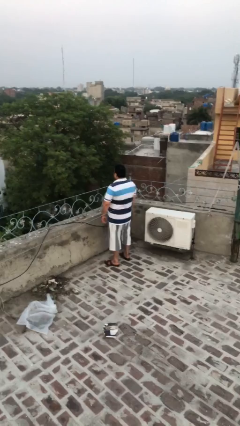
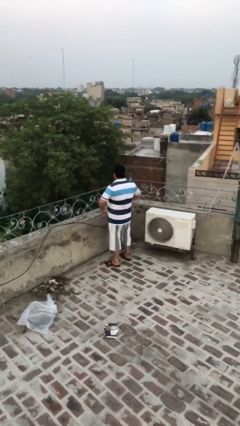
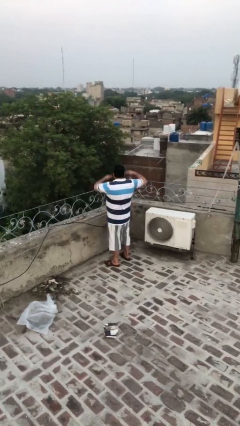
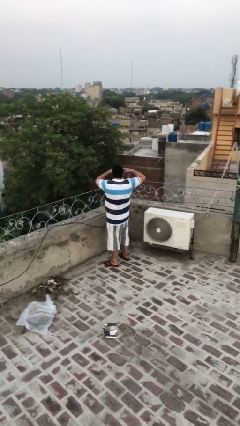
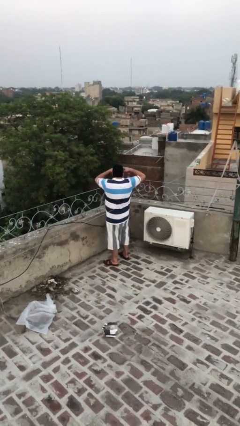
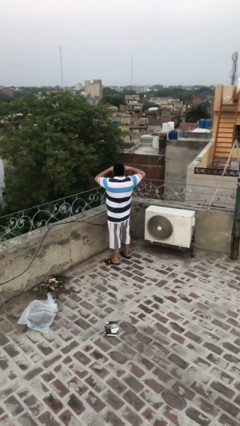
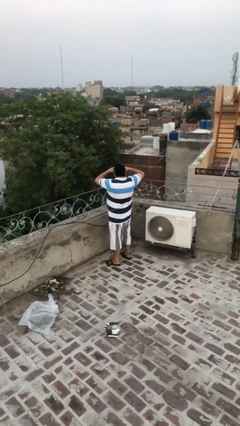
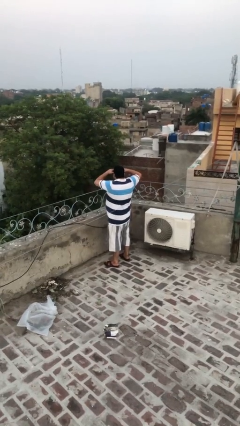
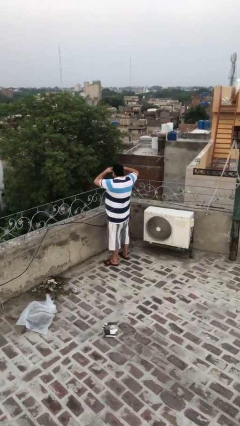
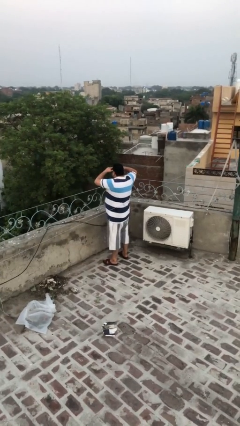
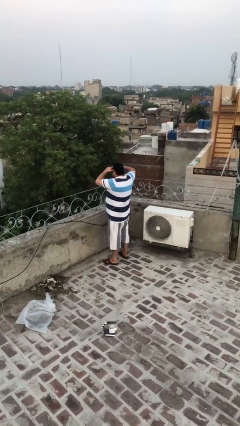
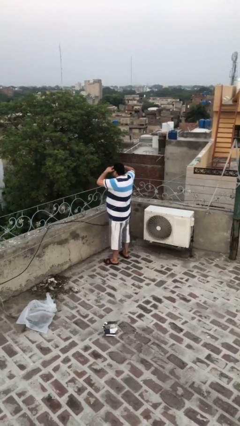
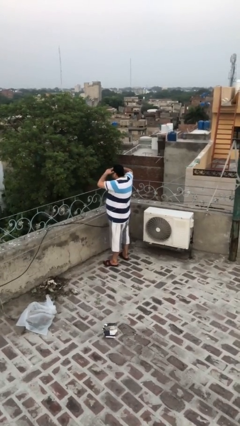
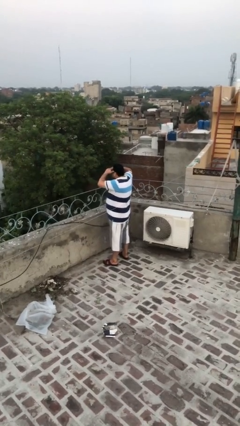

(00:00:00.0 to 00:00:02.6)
person shades eyes

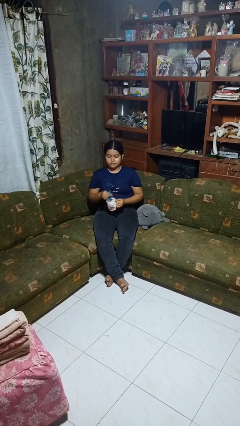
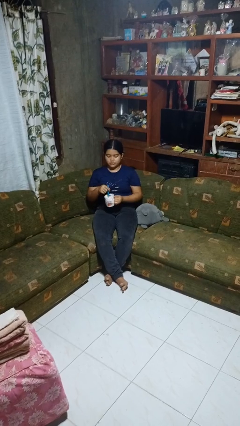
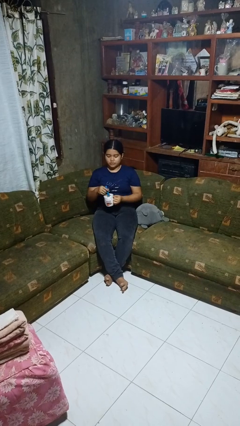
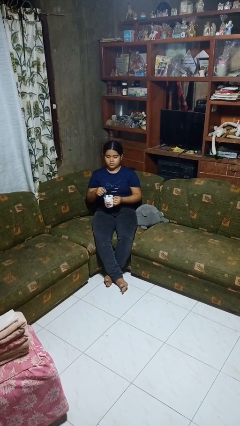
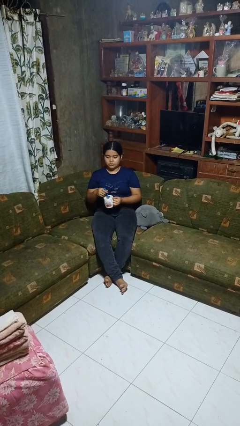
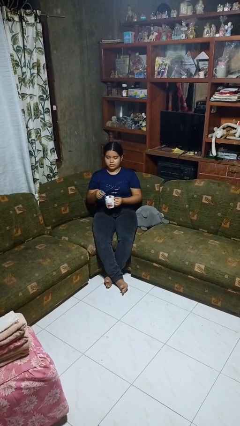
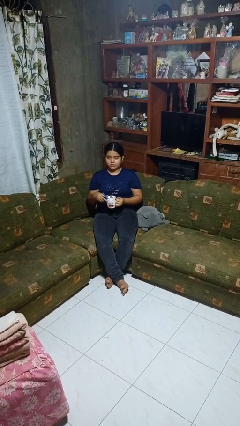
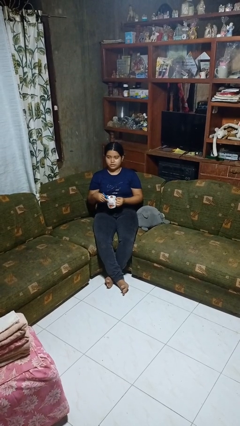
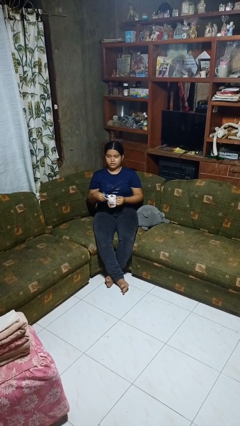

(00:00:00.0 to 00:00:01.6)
person stirs mug

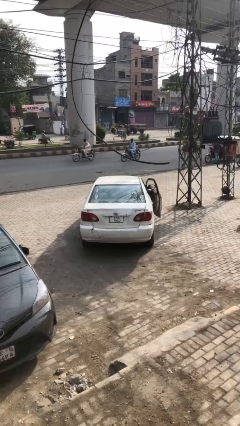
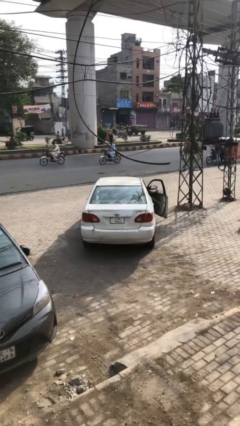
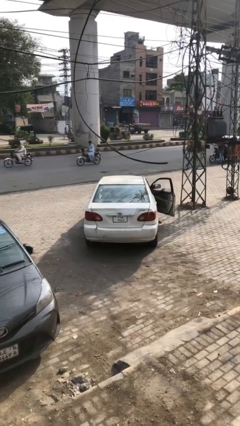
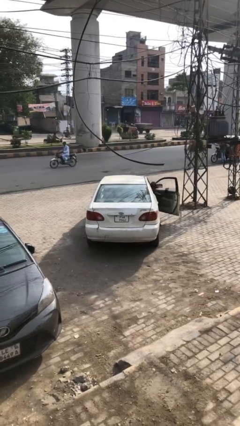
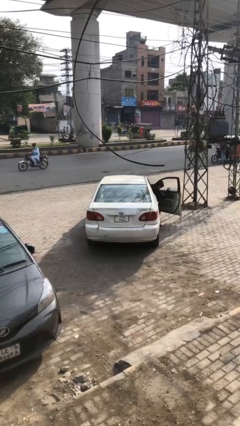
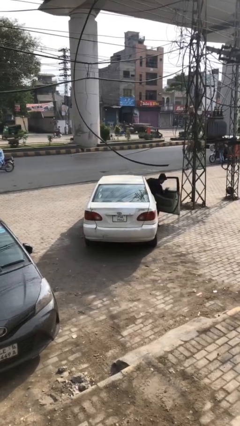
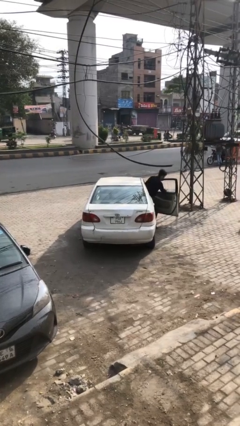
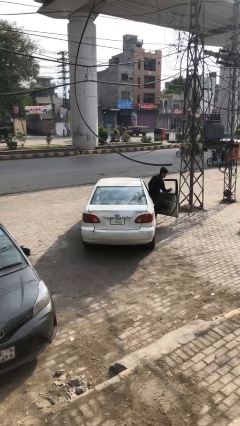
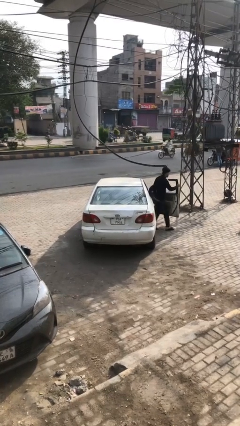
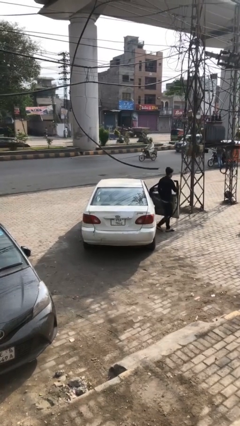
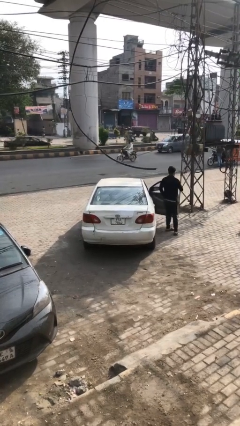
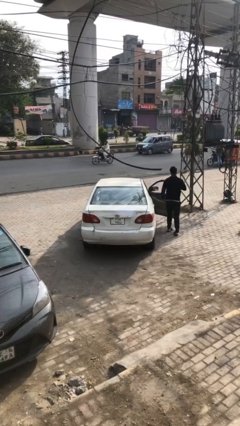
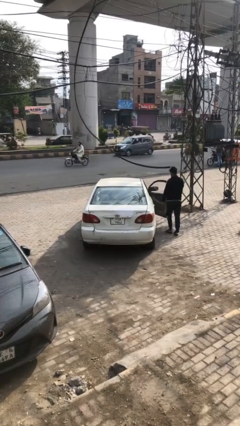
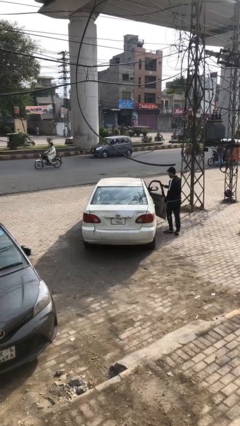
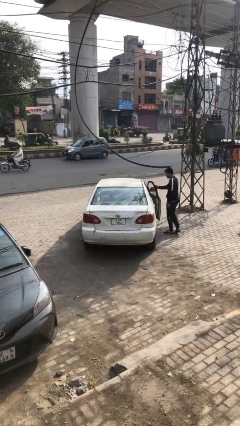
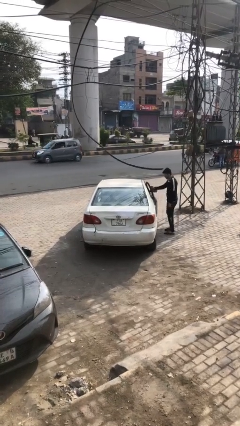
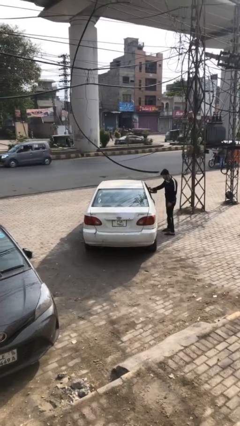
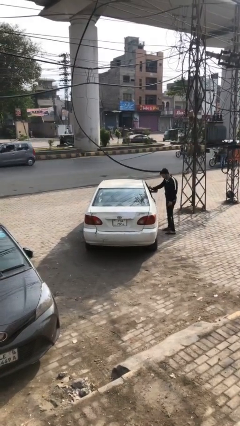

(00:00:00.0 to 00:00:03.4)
car drops off person

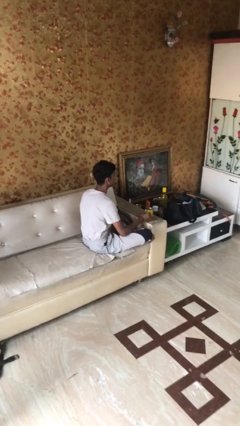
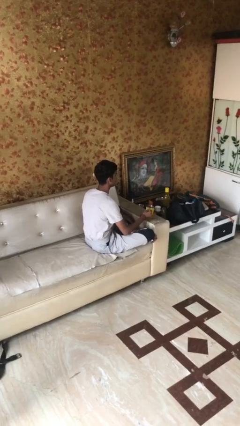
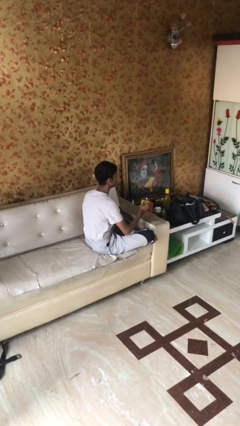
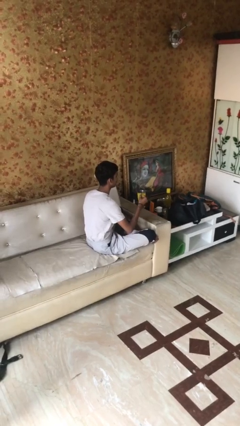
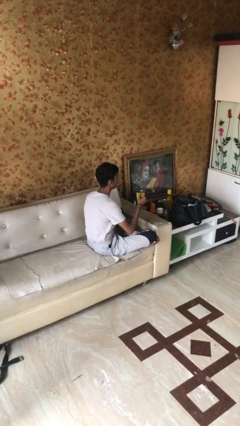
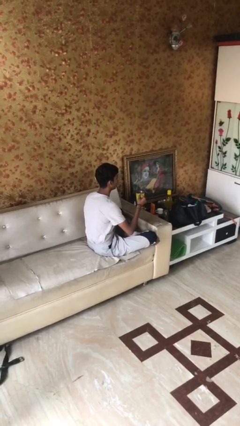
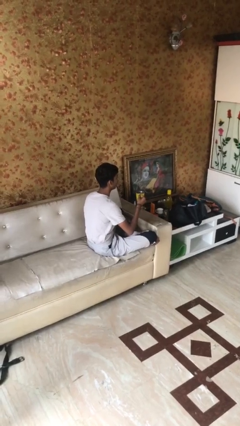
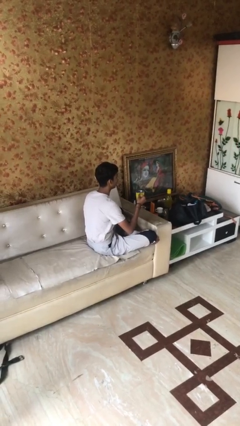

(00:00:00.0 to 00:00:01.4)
person picks up object from table

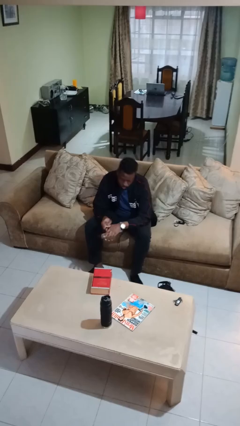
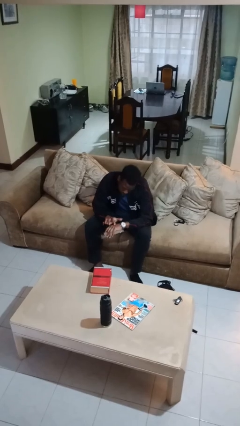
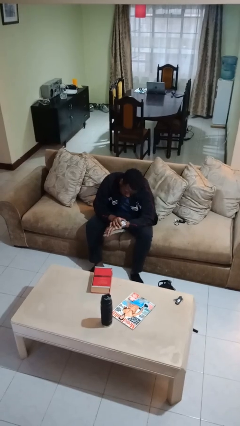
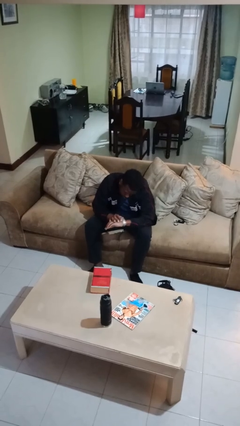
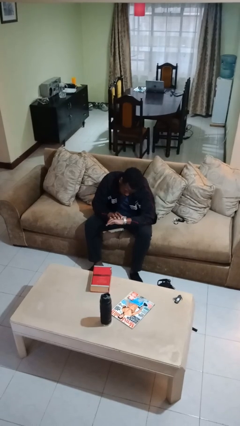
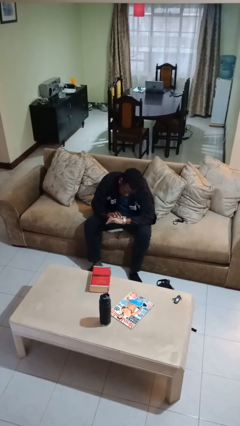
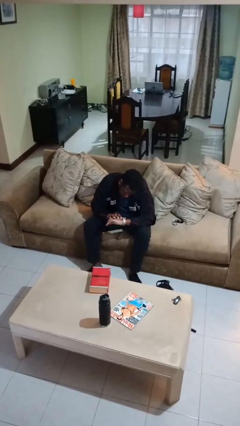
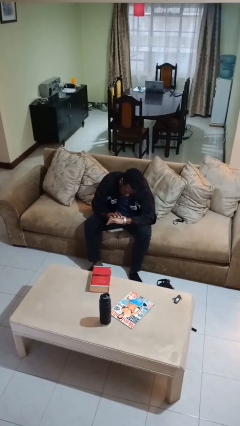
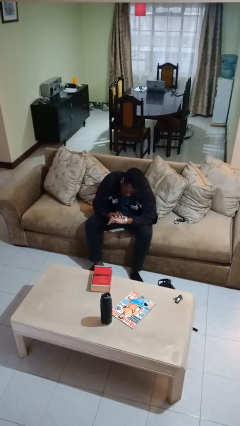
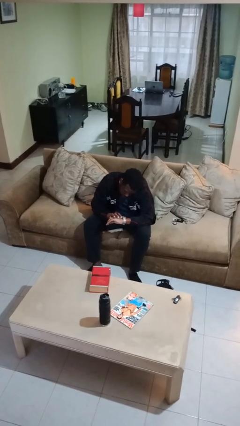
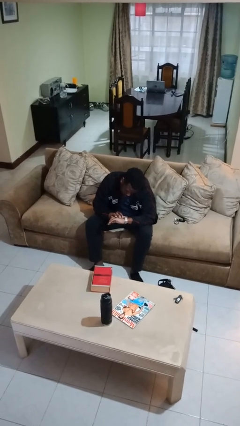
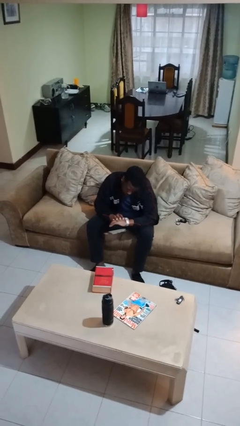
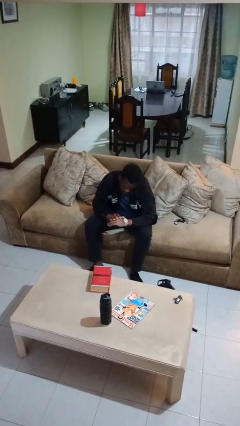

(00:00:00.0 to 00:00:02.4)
person looks at wristwatch

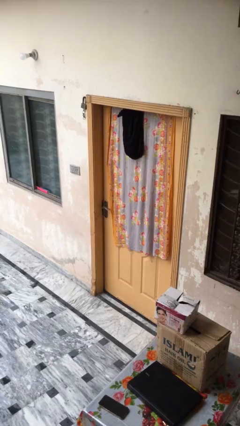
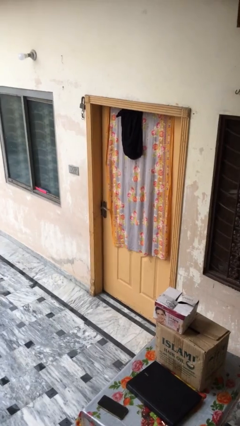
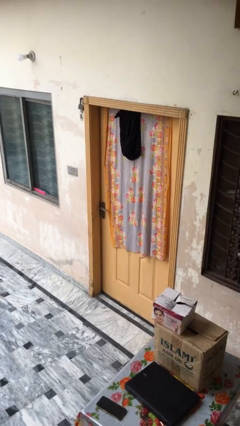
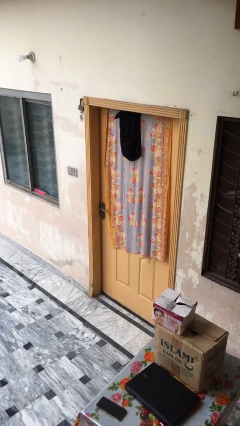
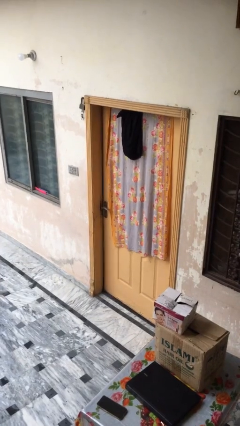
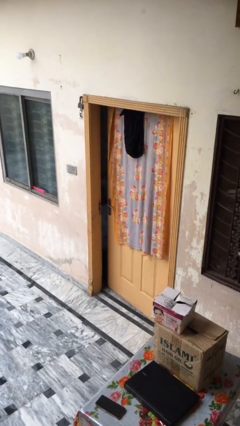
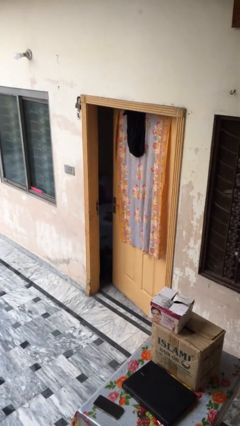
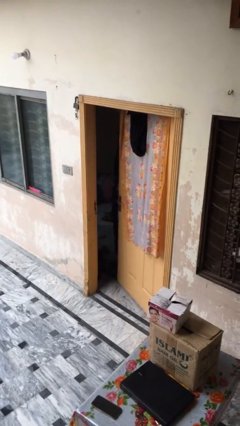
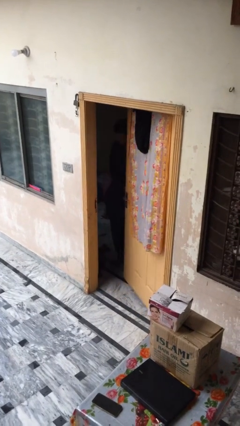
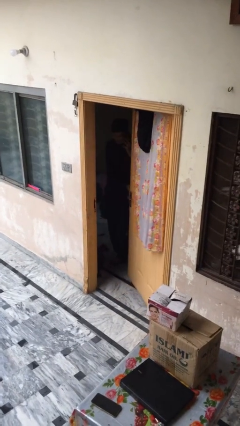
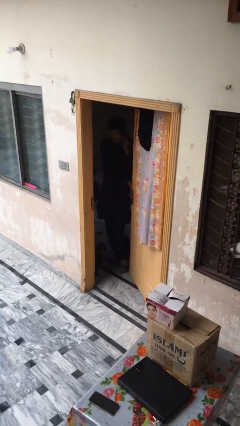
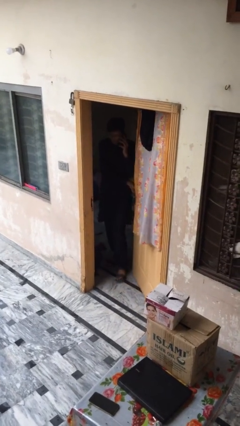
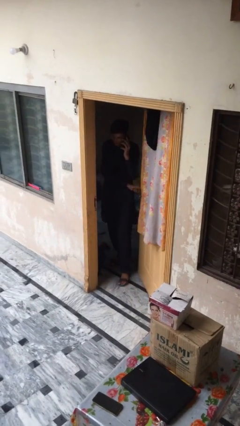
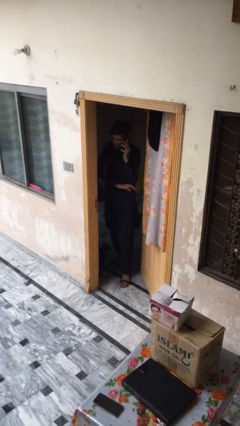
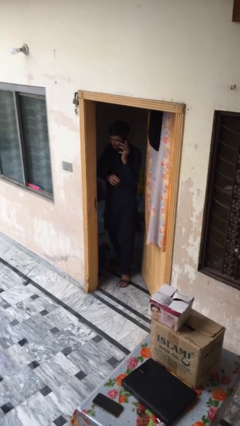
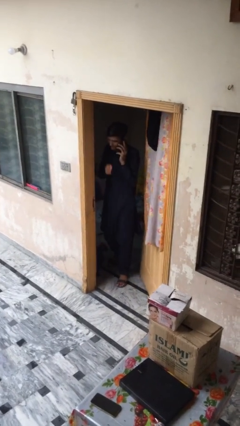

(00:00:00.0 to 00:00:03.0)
person opens facility door

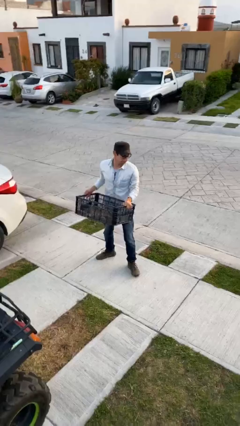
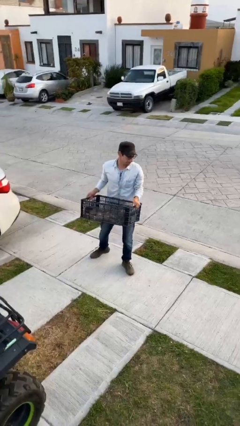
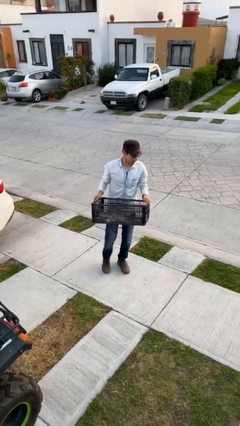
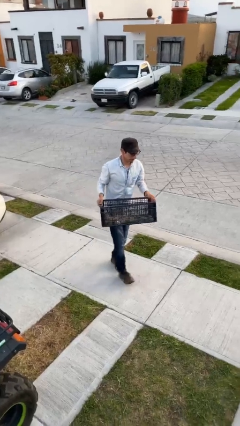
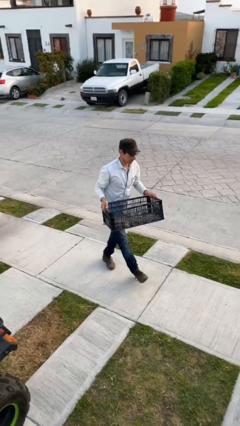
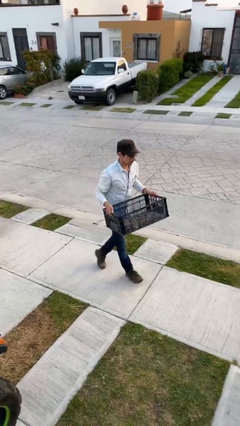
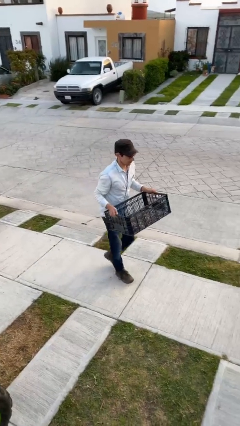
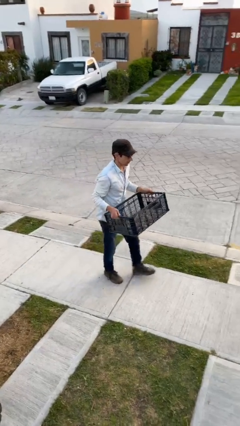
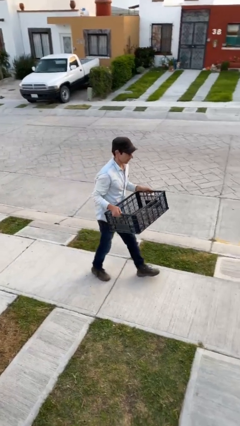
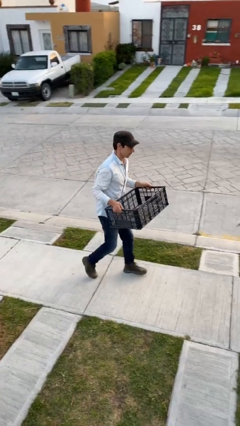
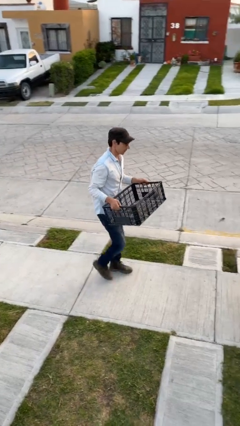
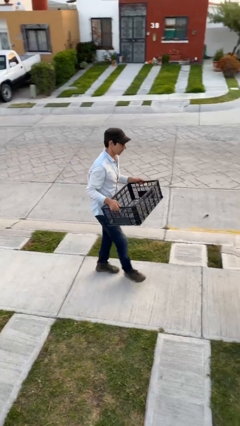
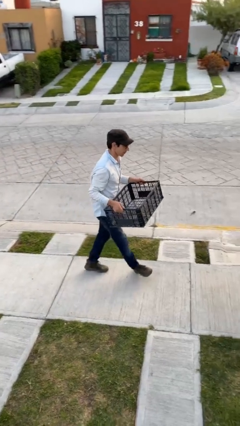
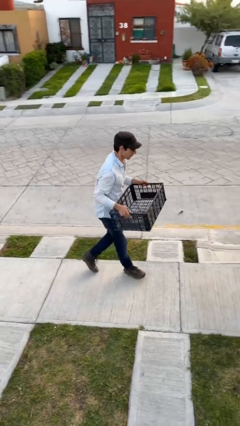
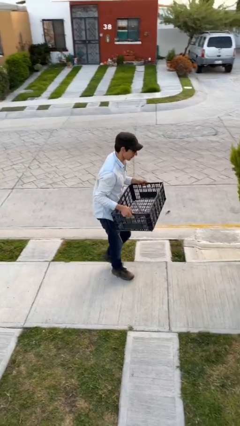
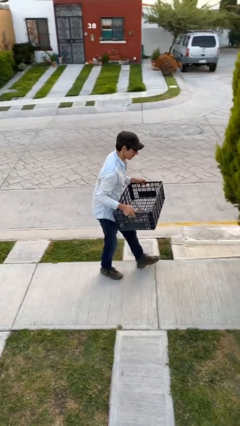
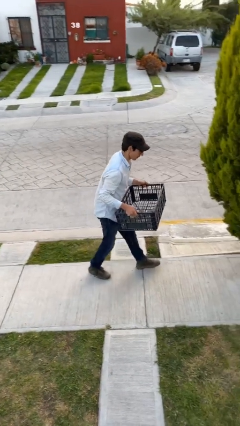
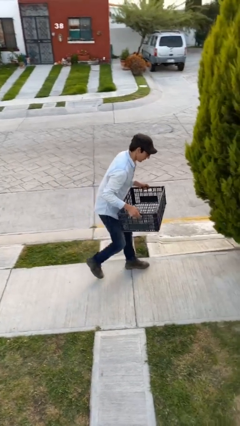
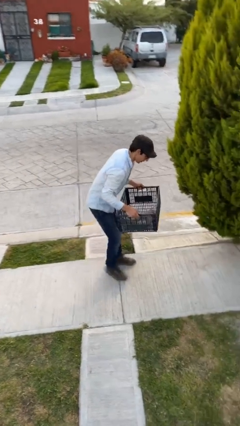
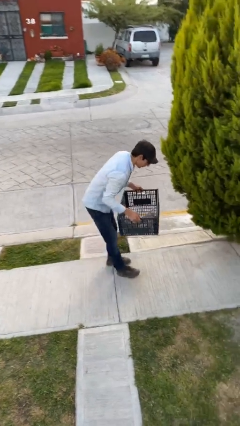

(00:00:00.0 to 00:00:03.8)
person carries heavy object
